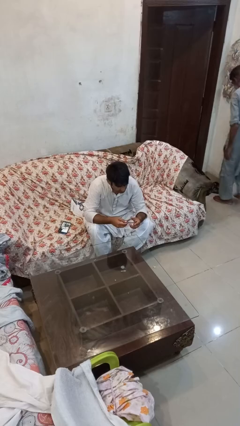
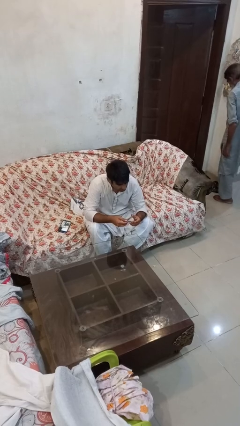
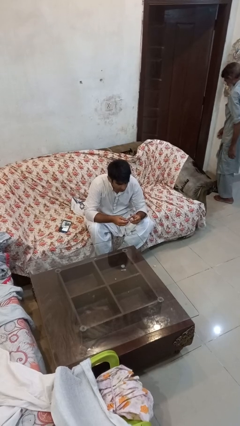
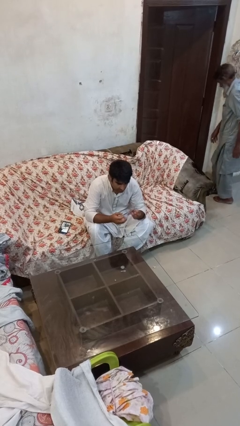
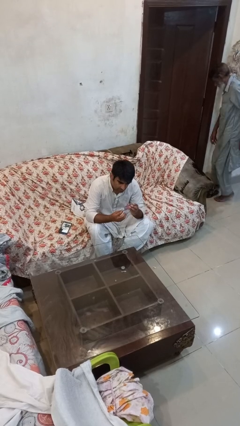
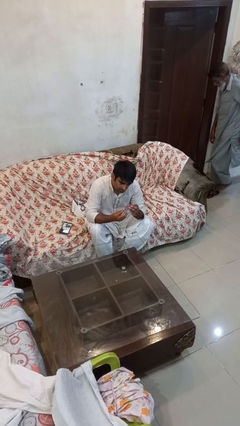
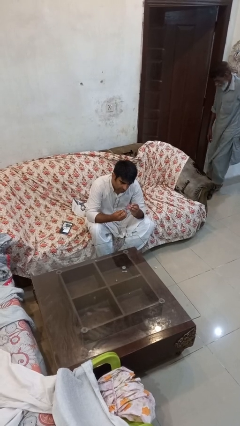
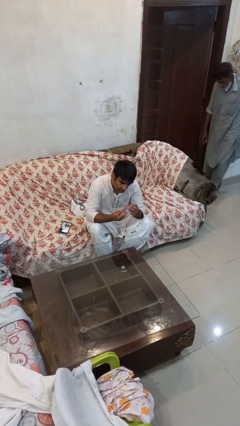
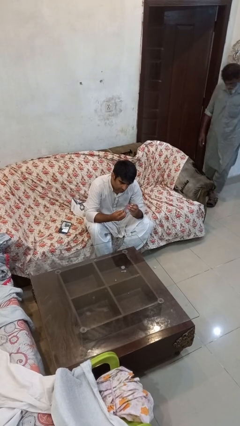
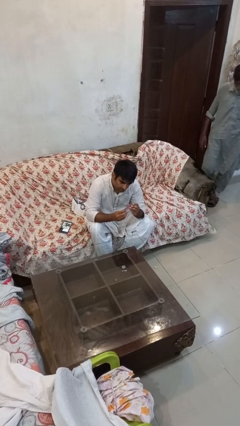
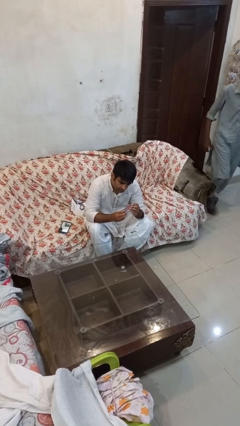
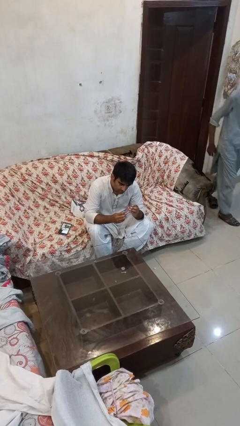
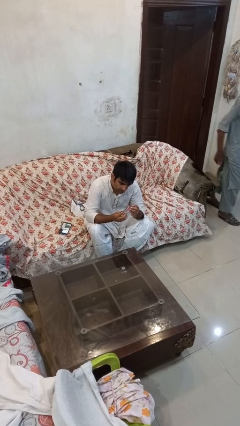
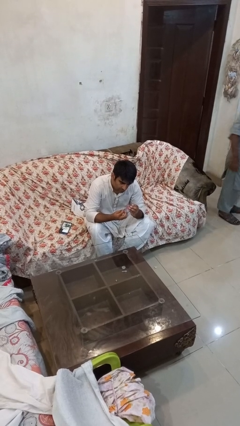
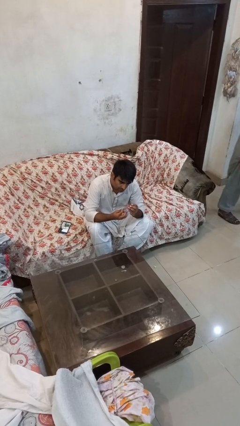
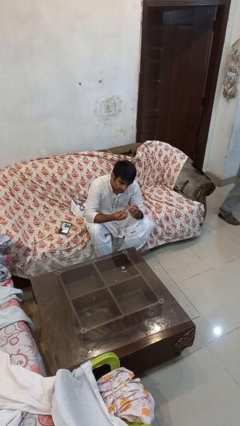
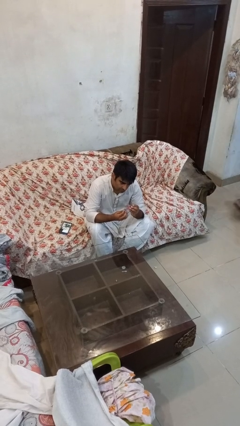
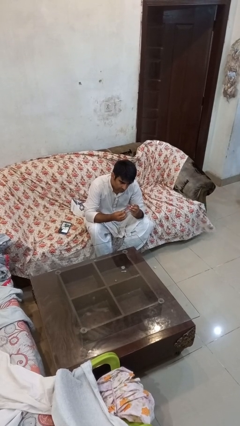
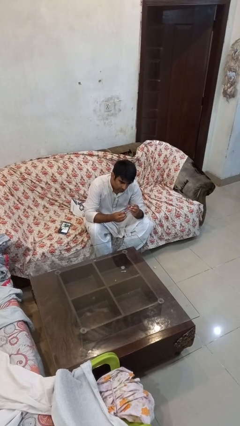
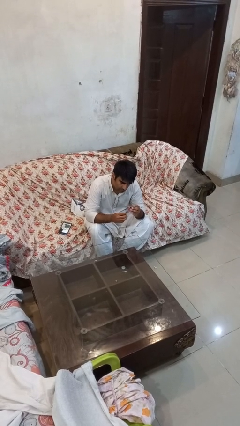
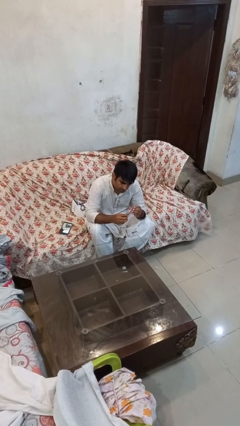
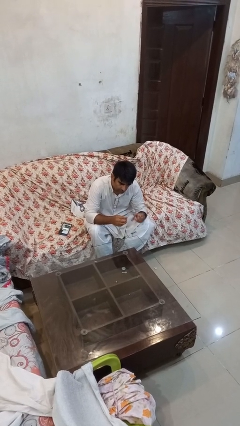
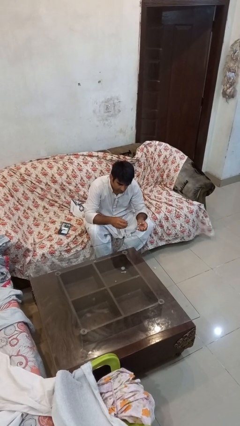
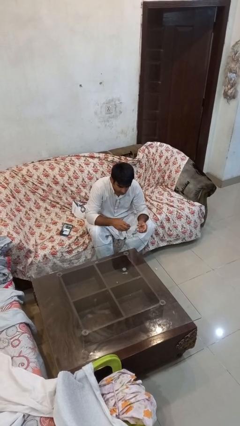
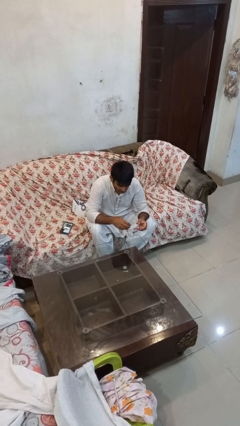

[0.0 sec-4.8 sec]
person clips fingernails

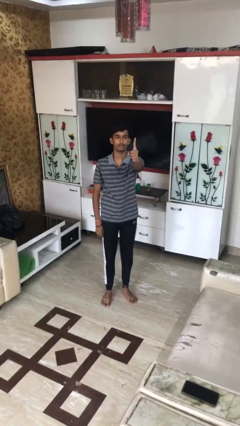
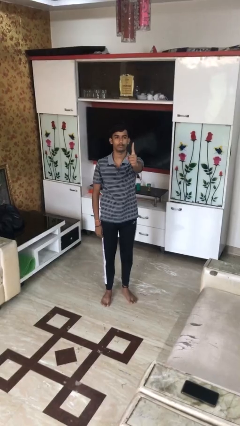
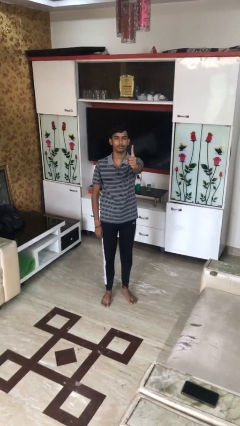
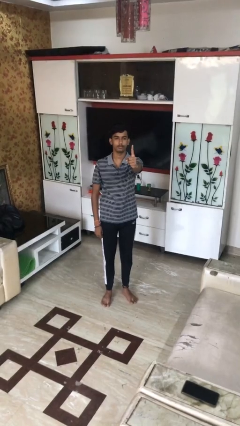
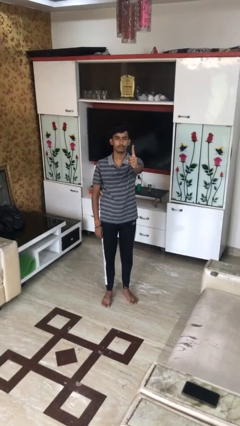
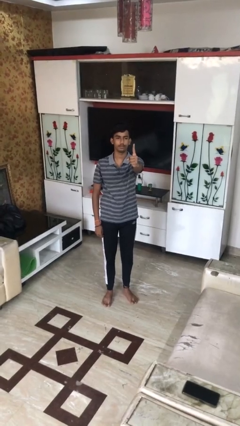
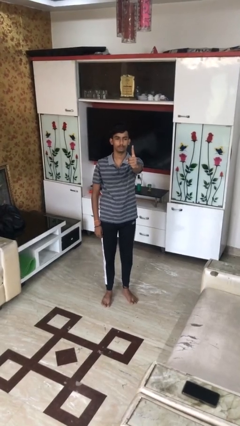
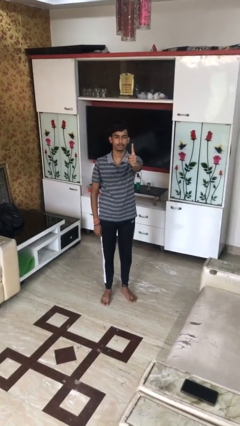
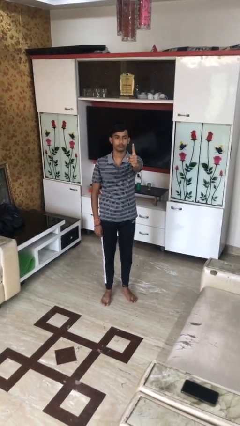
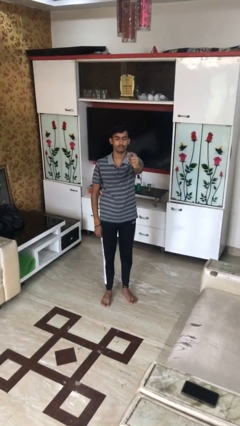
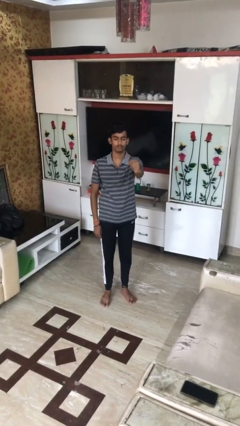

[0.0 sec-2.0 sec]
person gestures number one

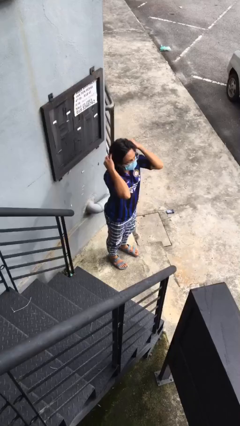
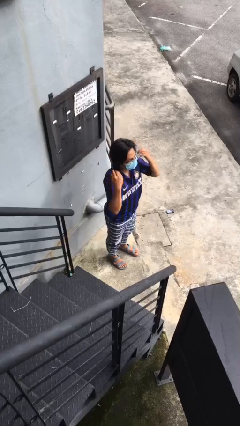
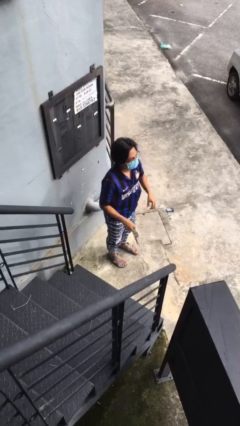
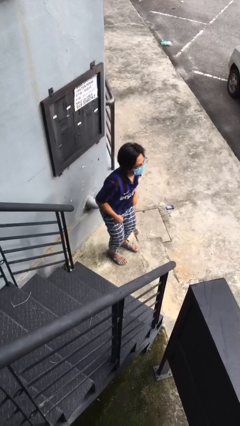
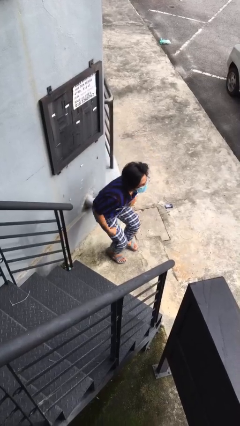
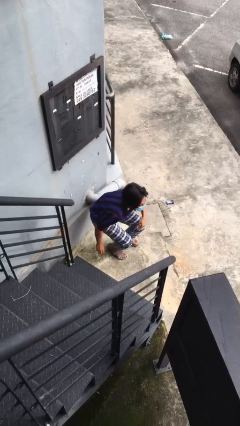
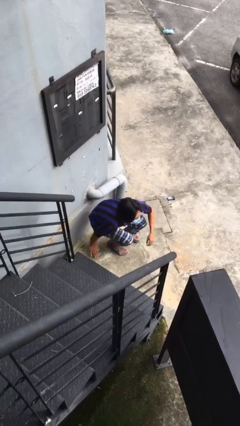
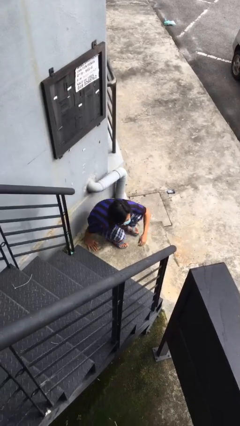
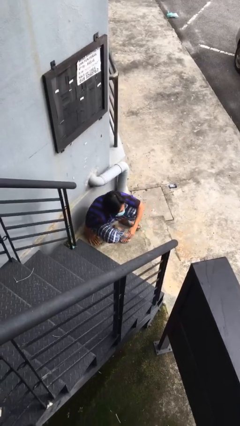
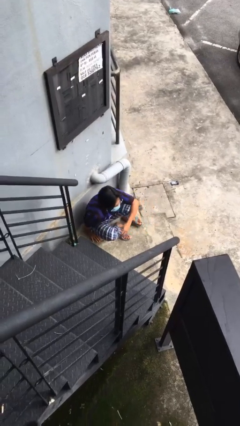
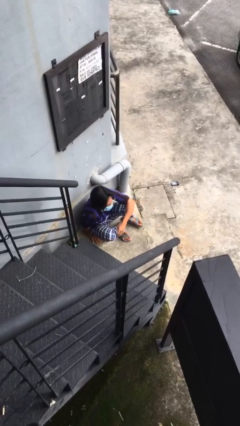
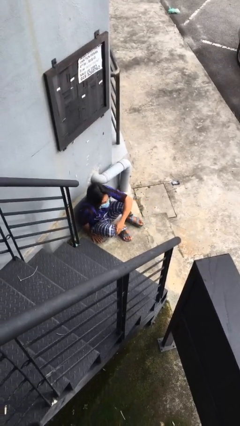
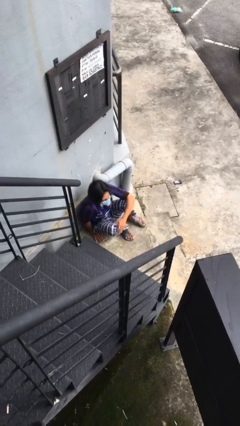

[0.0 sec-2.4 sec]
person sits down

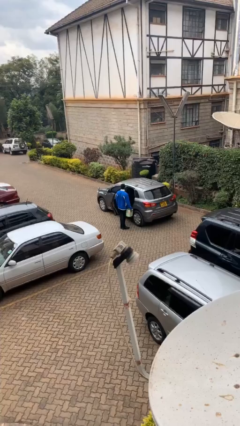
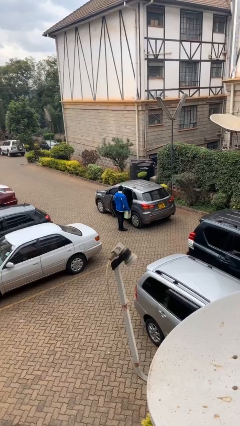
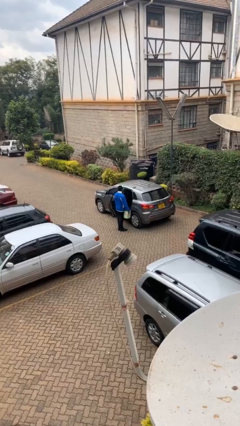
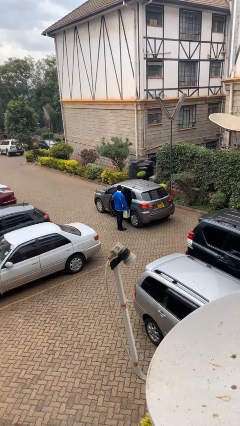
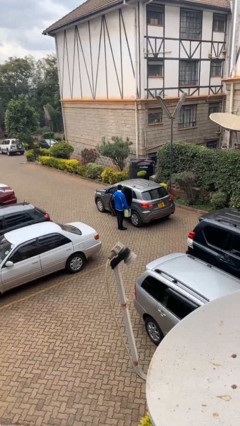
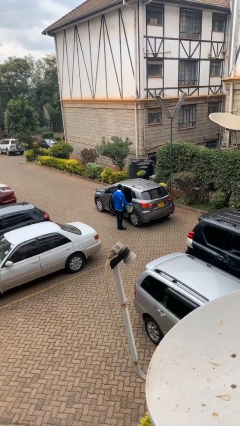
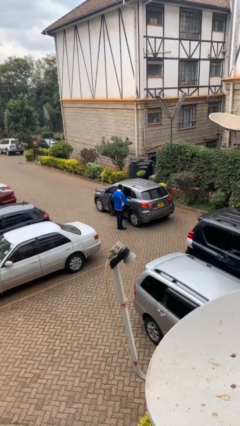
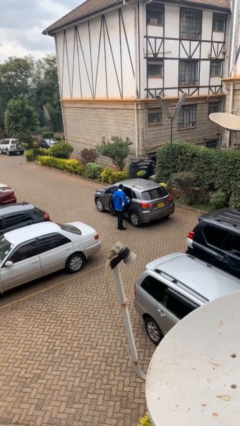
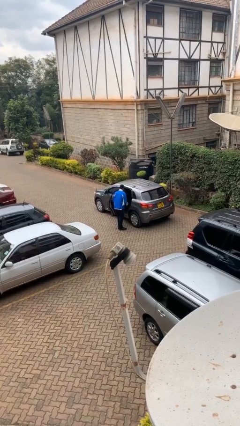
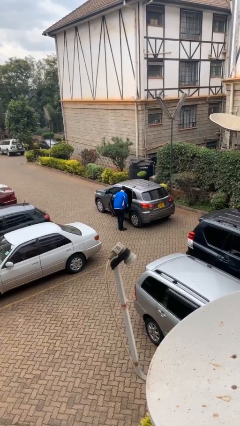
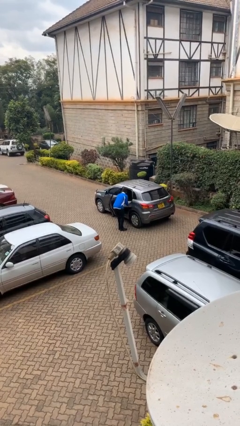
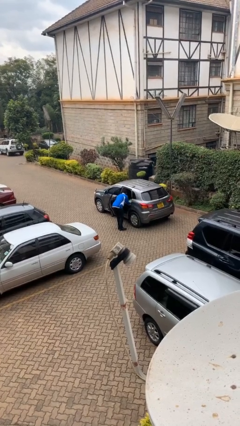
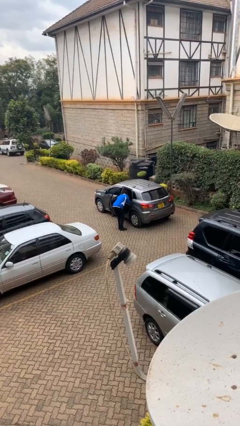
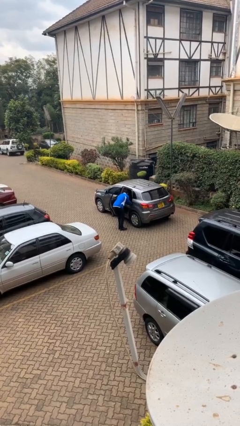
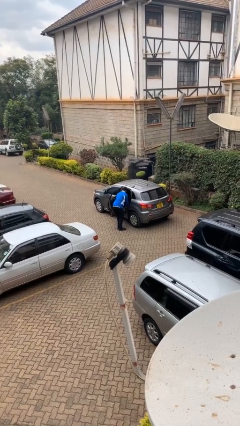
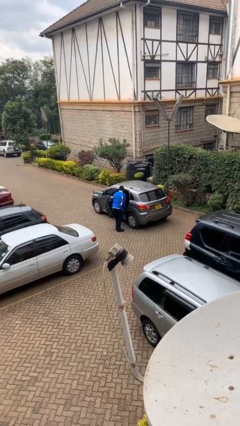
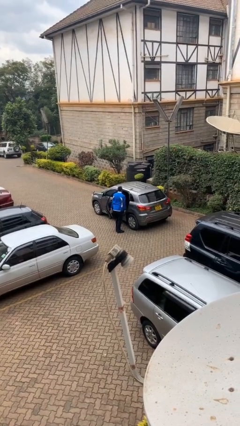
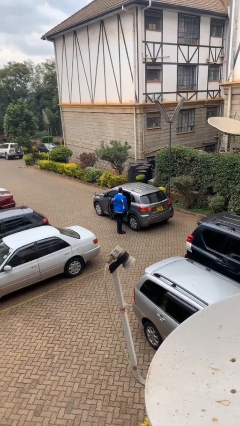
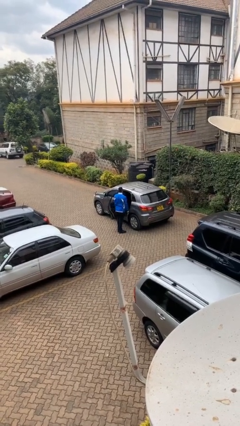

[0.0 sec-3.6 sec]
person loads car

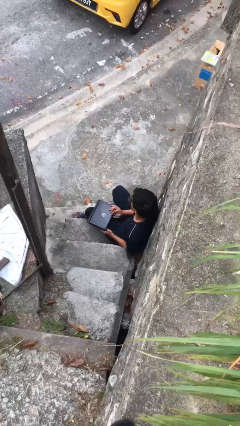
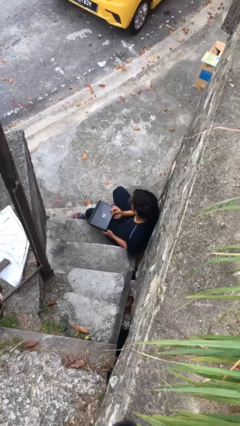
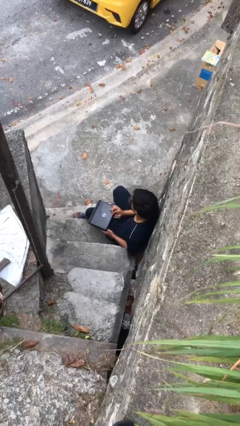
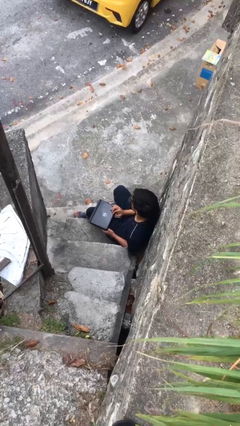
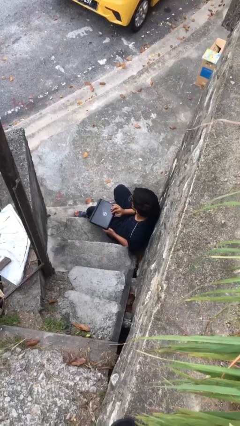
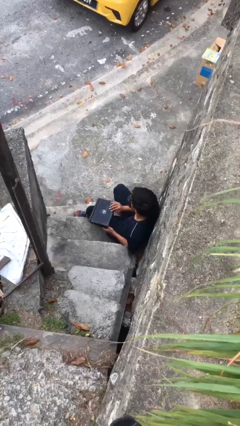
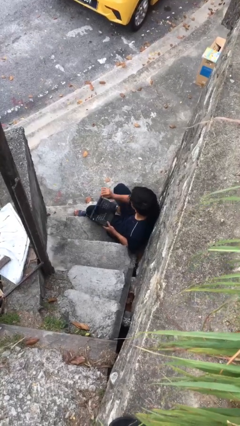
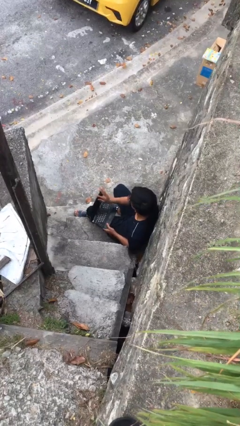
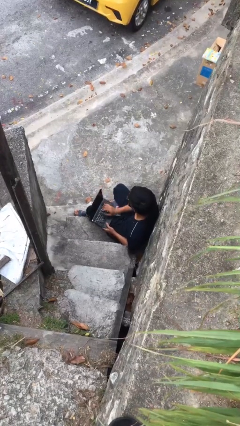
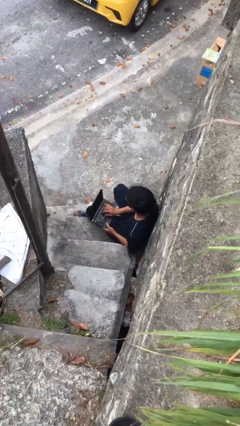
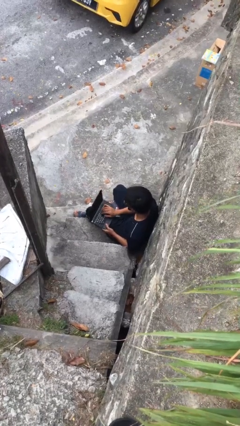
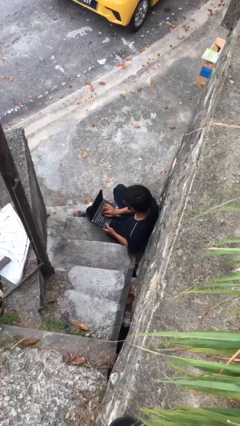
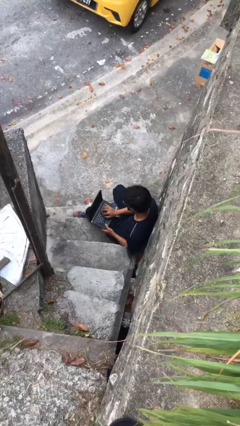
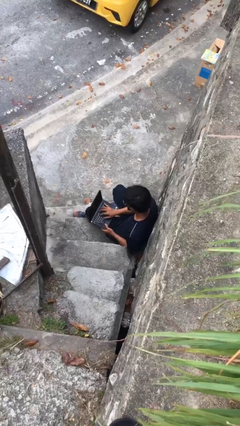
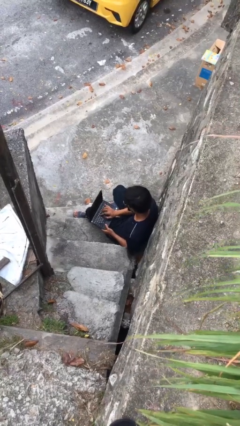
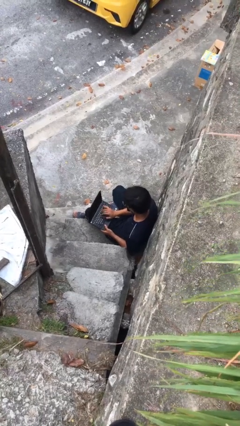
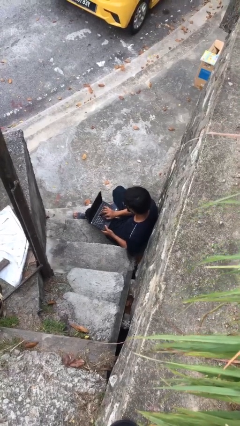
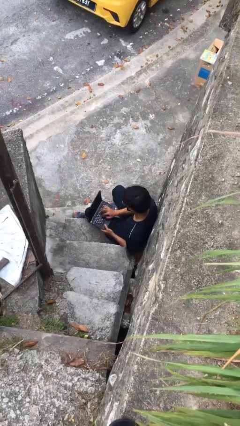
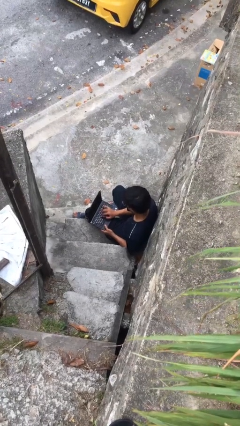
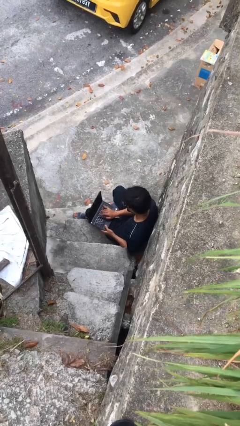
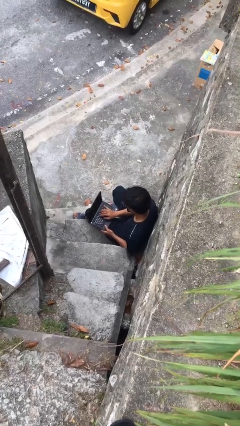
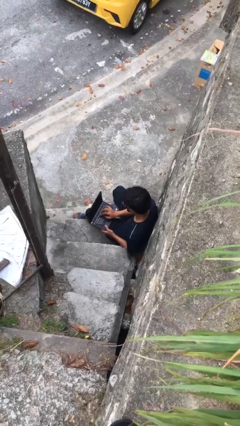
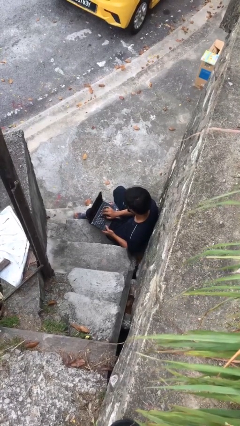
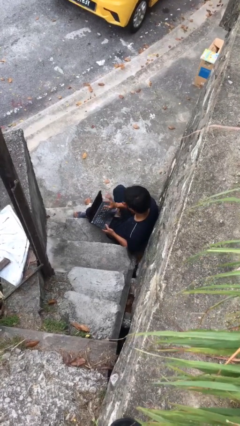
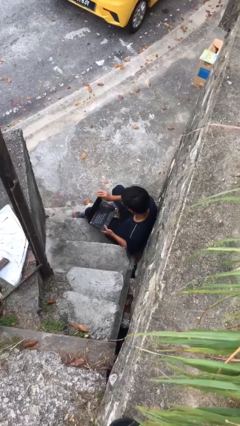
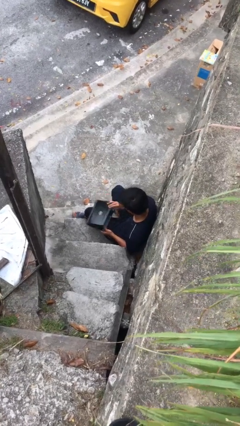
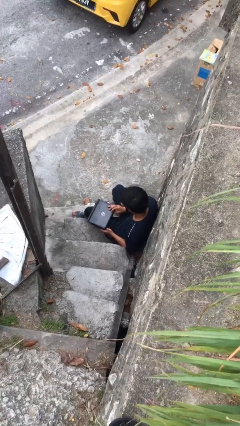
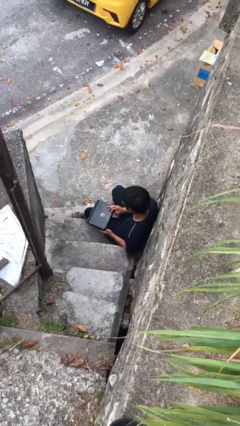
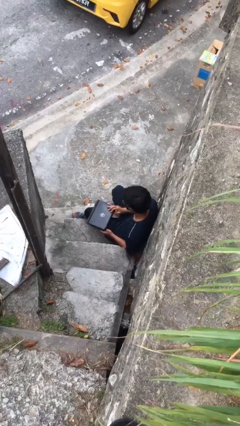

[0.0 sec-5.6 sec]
person interacts with laptop
